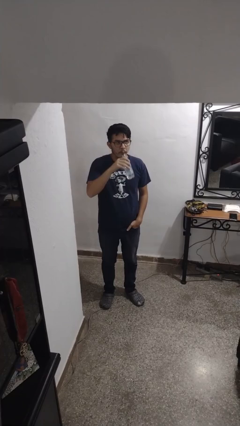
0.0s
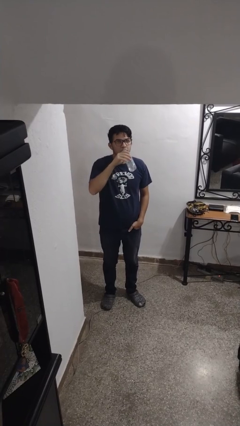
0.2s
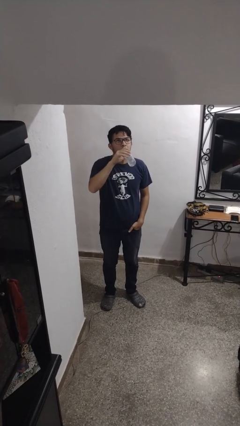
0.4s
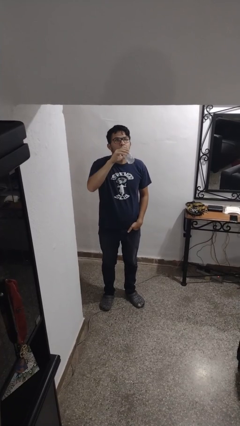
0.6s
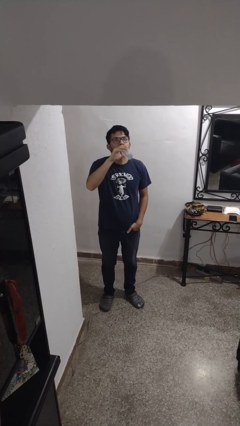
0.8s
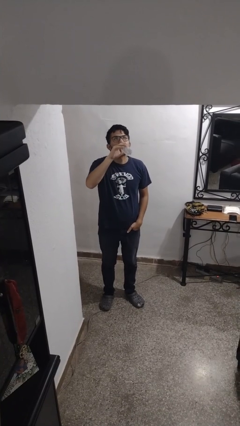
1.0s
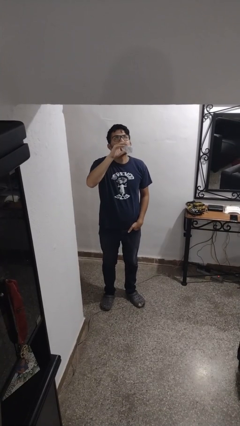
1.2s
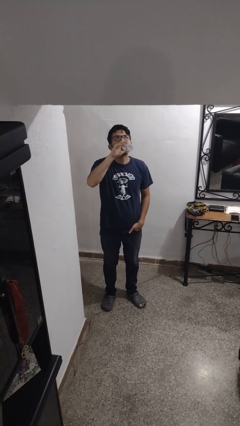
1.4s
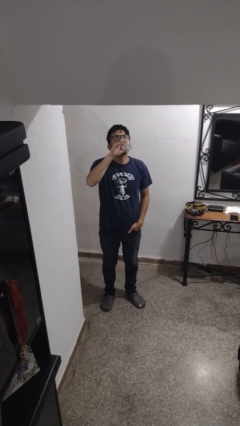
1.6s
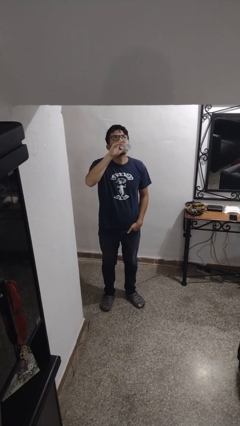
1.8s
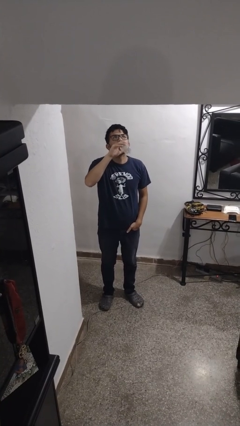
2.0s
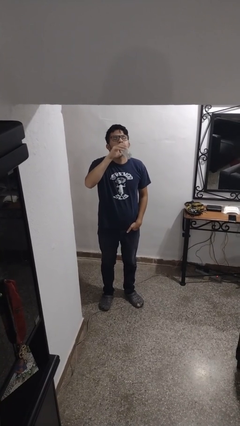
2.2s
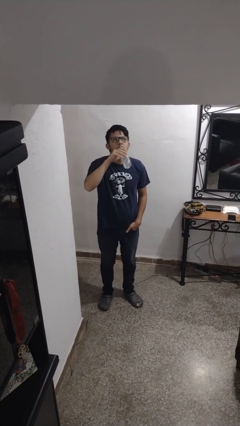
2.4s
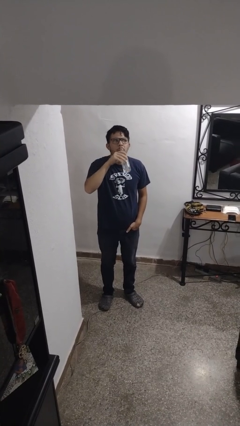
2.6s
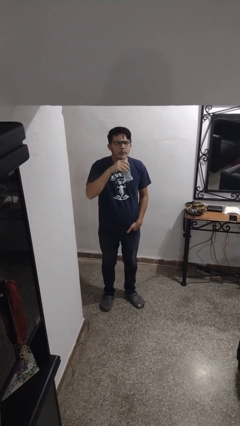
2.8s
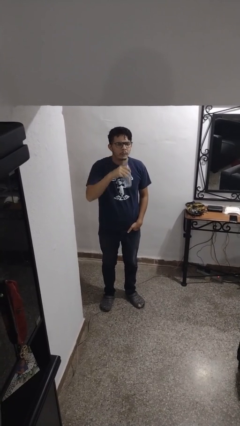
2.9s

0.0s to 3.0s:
person drinks from bottle

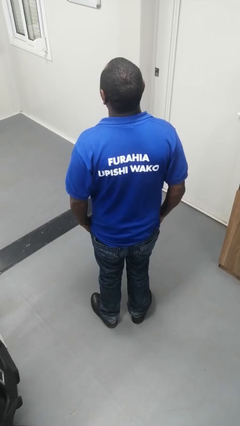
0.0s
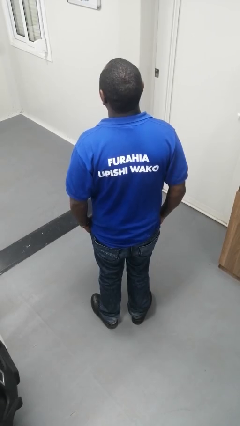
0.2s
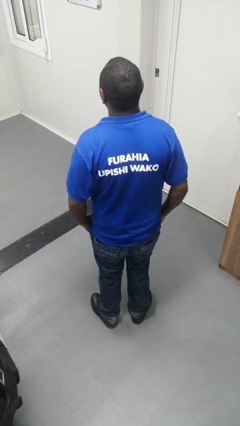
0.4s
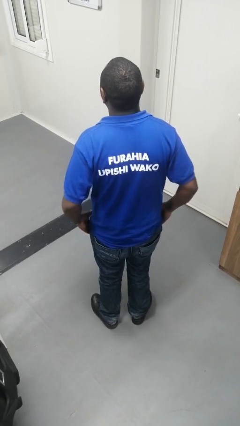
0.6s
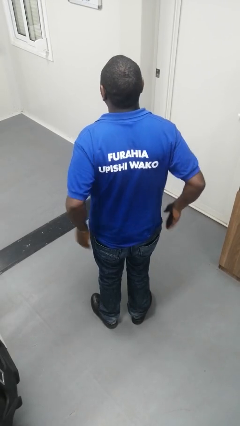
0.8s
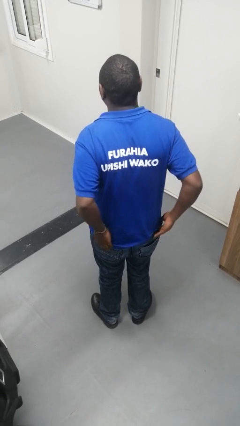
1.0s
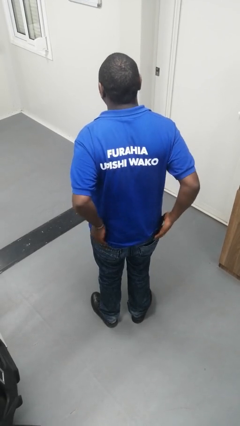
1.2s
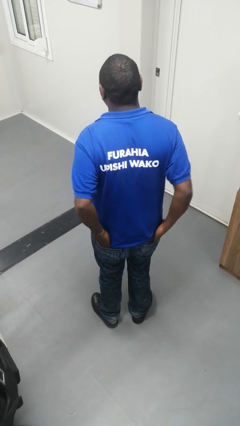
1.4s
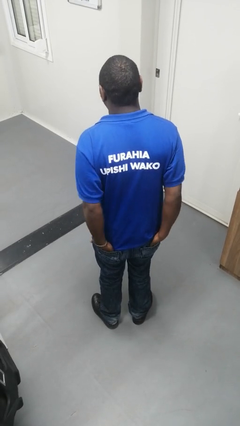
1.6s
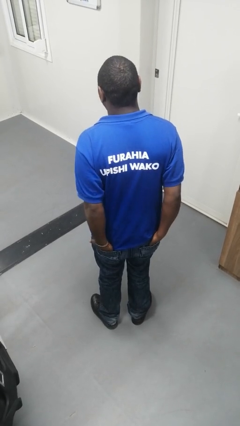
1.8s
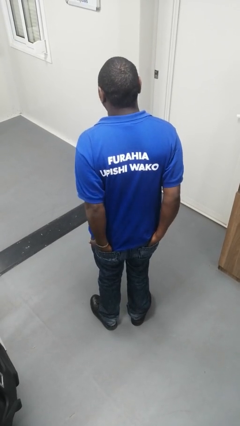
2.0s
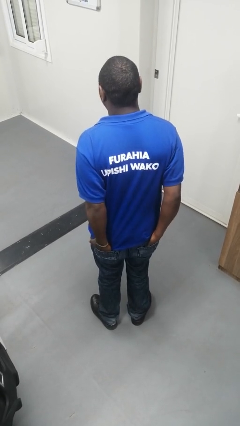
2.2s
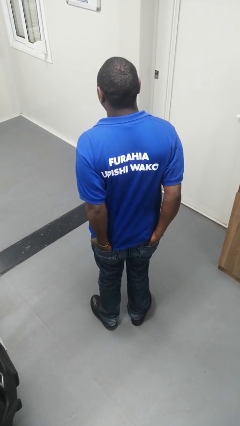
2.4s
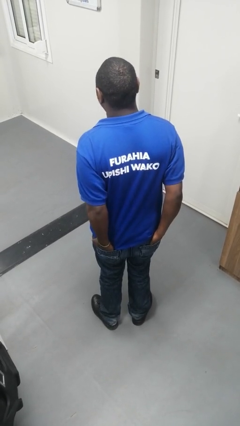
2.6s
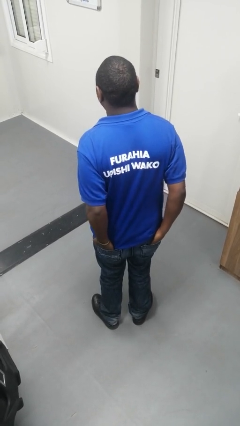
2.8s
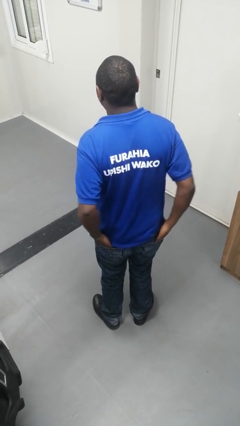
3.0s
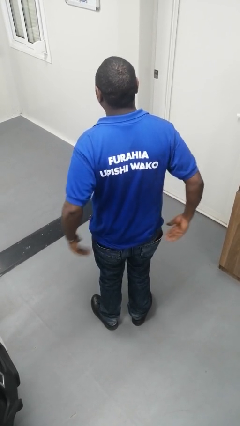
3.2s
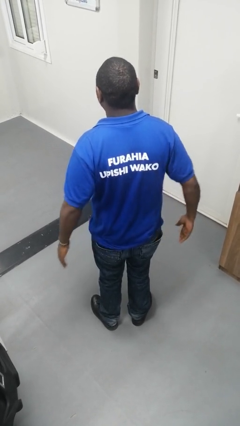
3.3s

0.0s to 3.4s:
person puts hands in back pockets
